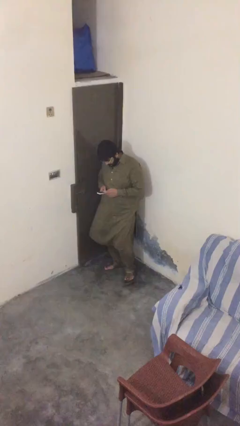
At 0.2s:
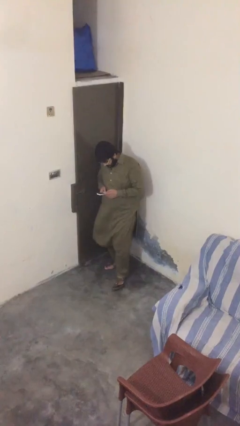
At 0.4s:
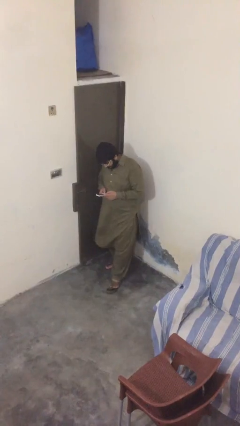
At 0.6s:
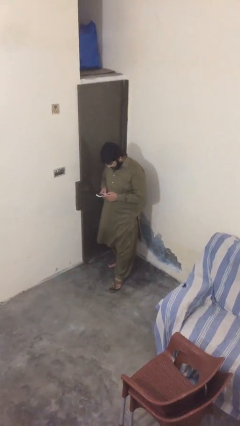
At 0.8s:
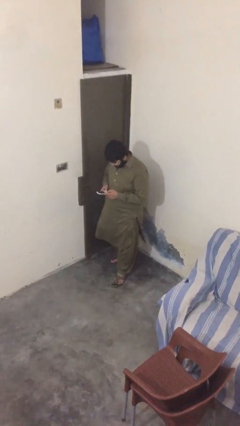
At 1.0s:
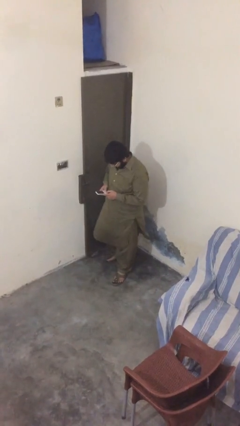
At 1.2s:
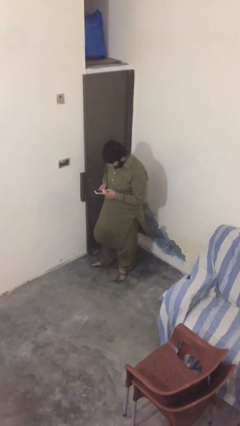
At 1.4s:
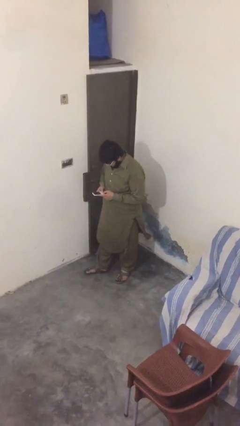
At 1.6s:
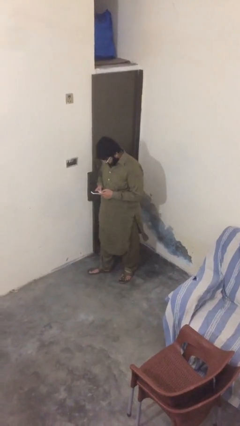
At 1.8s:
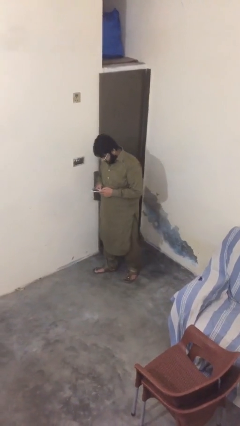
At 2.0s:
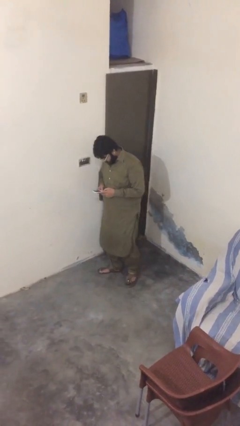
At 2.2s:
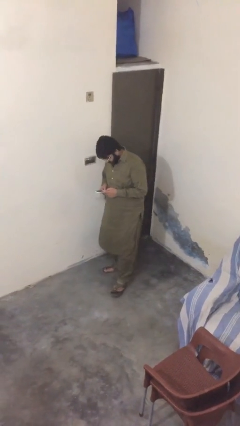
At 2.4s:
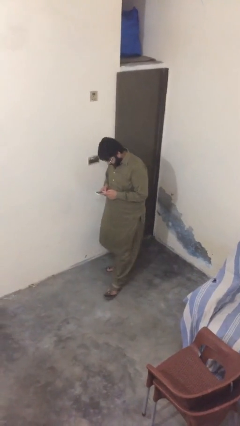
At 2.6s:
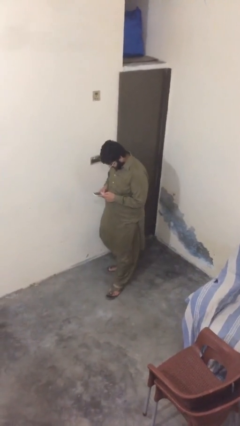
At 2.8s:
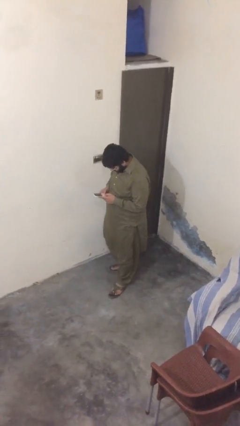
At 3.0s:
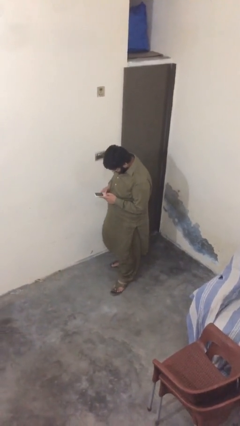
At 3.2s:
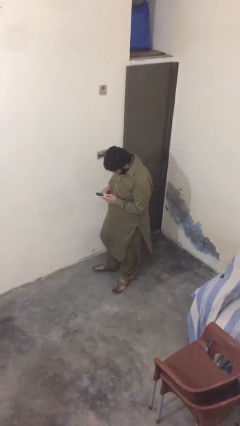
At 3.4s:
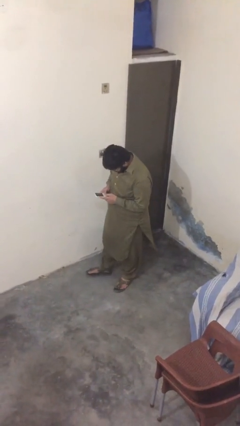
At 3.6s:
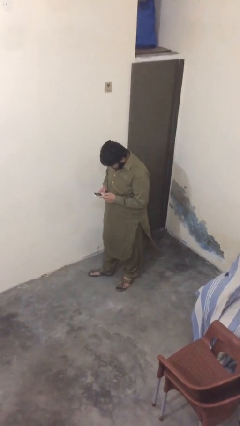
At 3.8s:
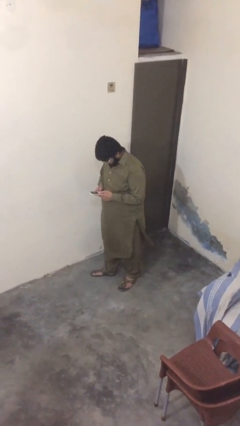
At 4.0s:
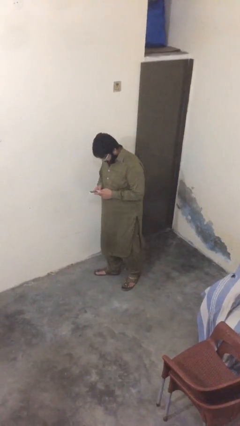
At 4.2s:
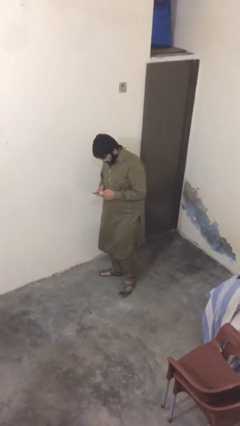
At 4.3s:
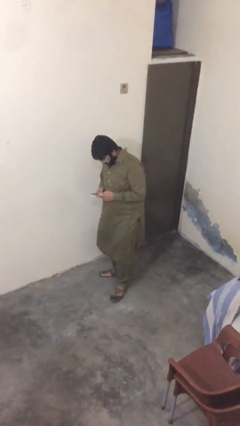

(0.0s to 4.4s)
person texts on phone

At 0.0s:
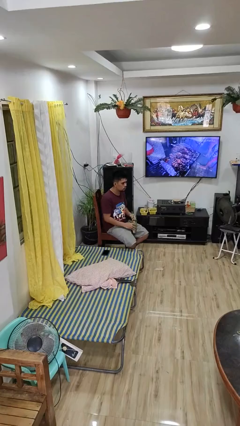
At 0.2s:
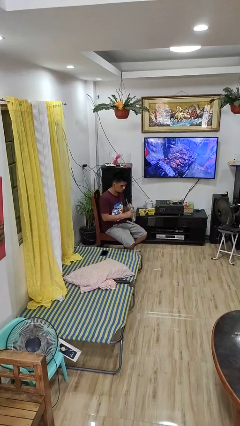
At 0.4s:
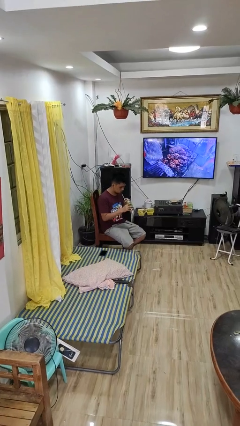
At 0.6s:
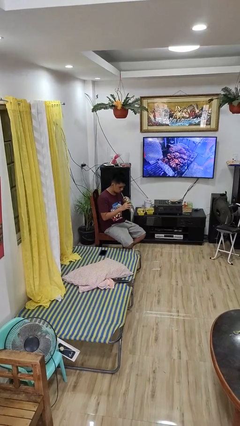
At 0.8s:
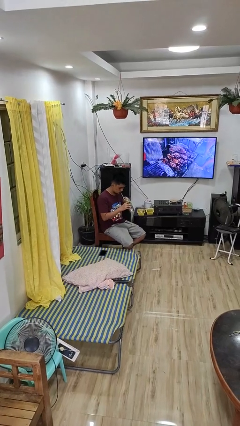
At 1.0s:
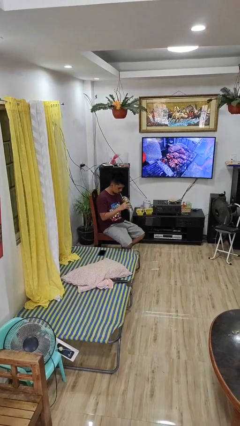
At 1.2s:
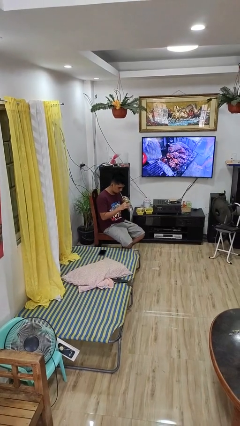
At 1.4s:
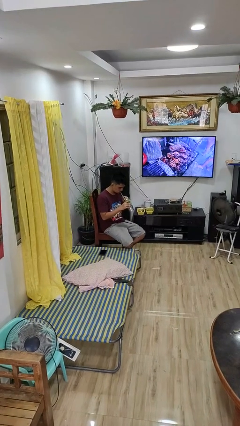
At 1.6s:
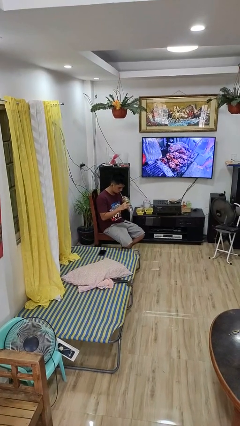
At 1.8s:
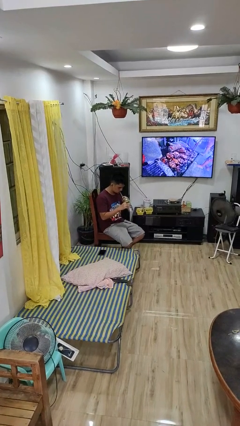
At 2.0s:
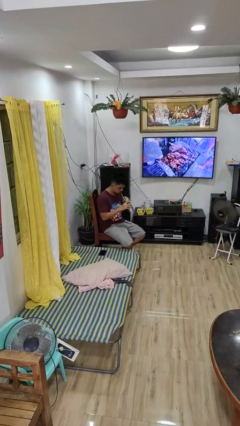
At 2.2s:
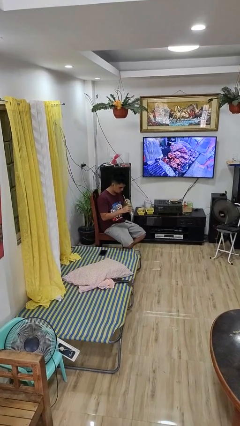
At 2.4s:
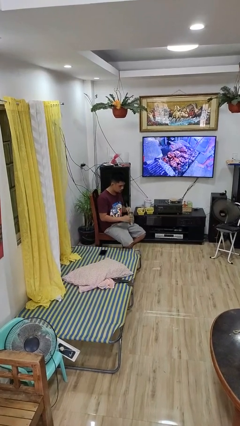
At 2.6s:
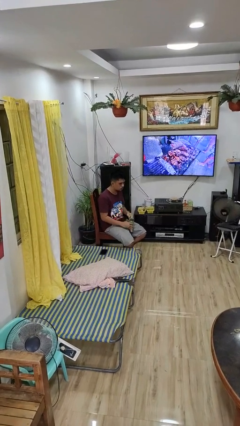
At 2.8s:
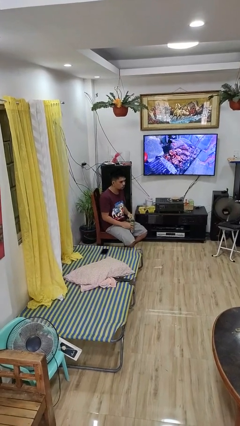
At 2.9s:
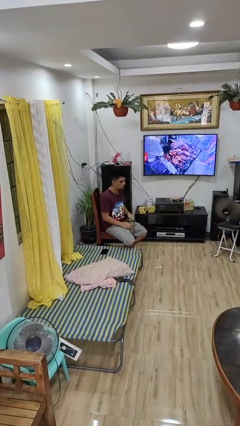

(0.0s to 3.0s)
person drinks from straw

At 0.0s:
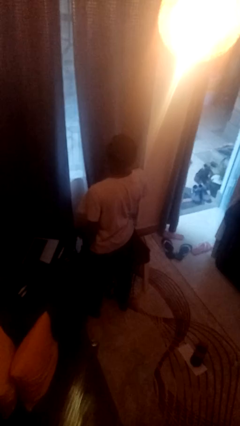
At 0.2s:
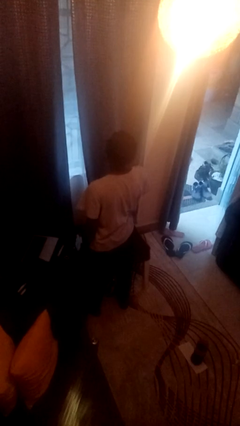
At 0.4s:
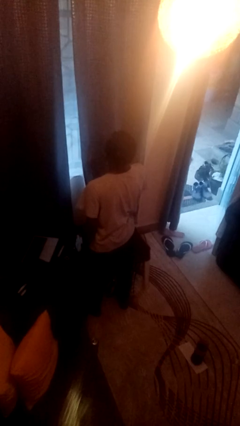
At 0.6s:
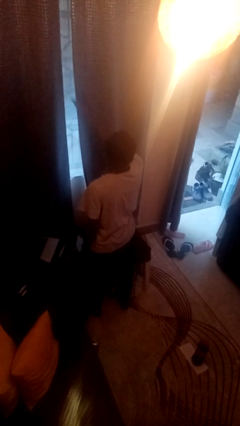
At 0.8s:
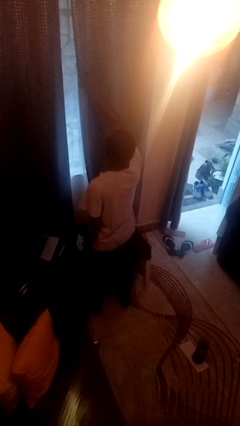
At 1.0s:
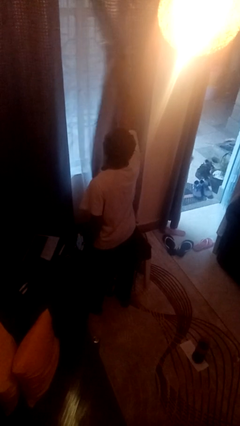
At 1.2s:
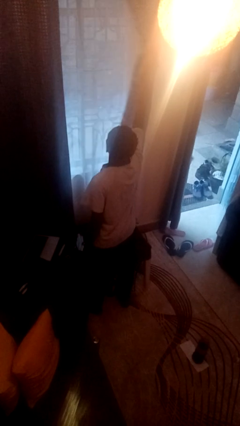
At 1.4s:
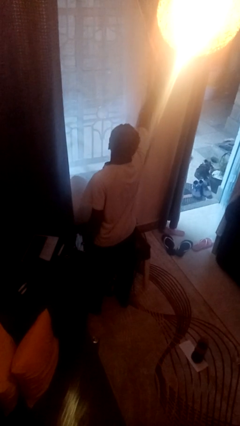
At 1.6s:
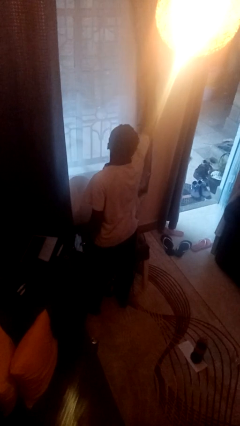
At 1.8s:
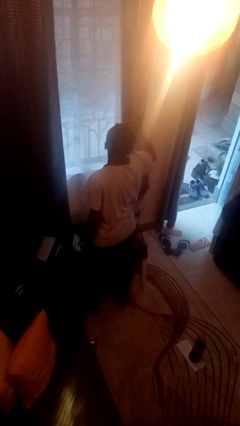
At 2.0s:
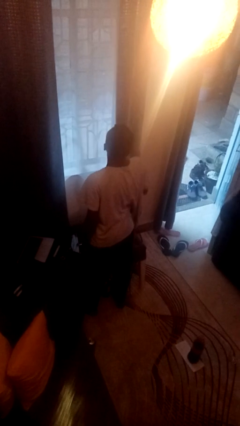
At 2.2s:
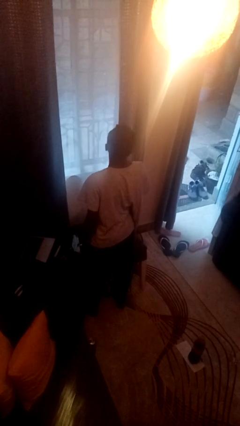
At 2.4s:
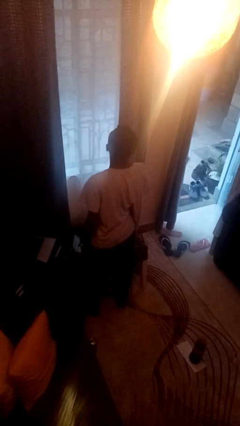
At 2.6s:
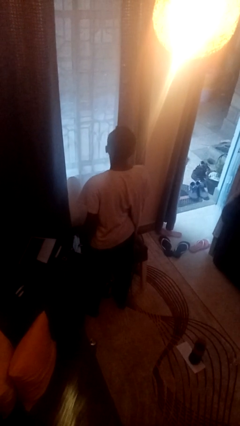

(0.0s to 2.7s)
person opens curtains

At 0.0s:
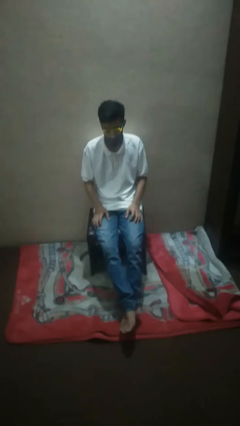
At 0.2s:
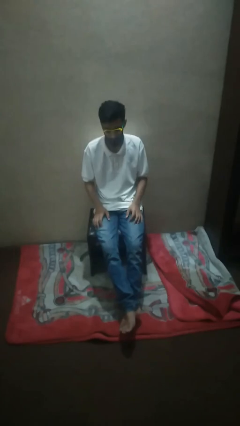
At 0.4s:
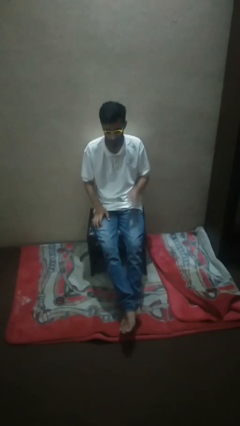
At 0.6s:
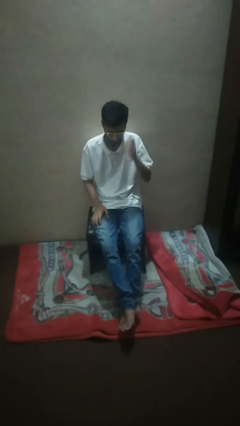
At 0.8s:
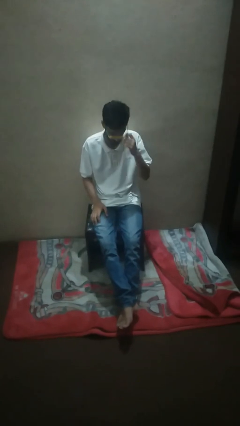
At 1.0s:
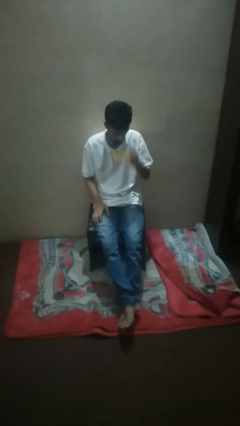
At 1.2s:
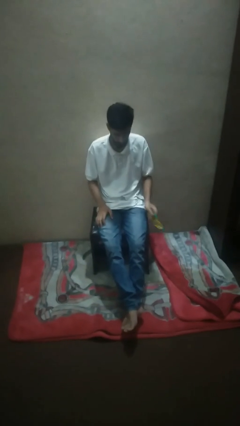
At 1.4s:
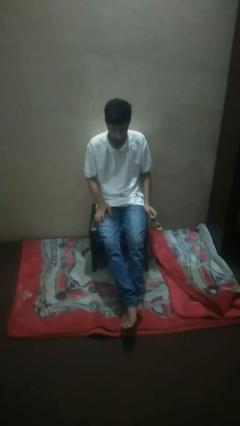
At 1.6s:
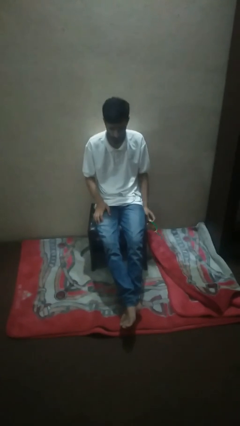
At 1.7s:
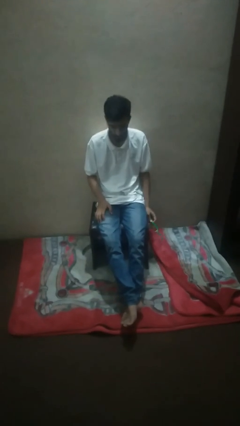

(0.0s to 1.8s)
person takes off sunglasses

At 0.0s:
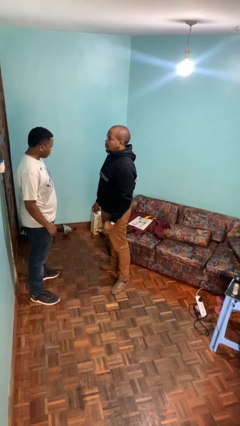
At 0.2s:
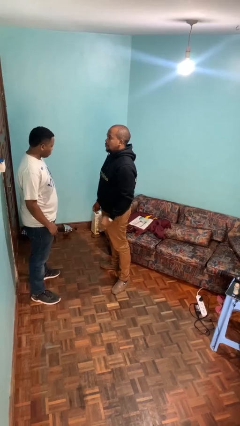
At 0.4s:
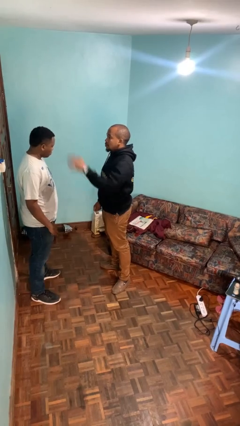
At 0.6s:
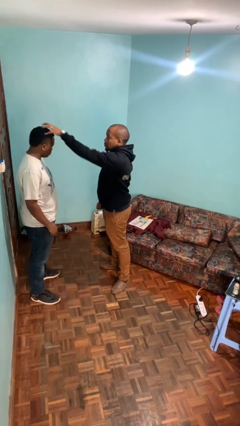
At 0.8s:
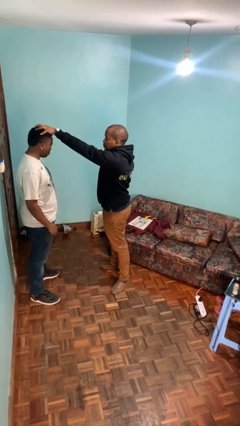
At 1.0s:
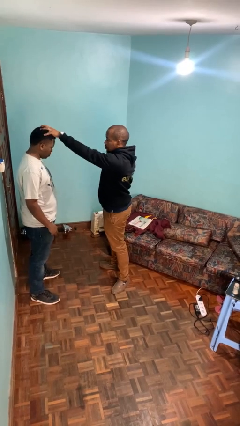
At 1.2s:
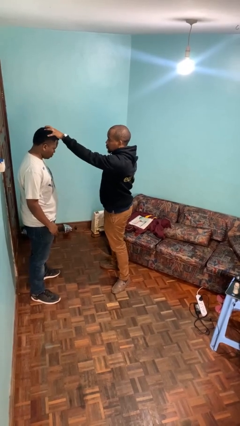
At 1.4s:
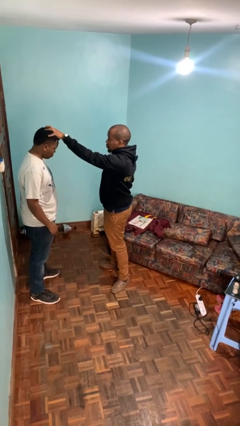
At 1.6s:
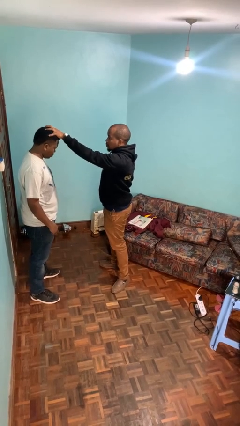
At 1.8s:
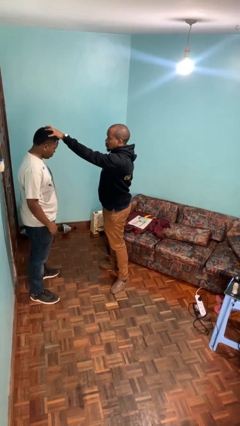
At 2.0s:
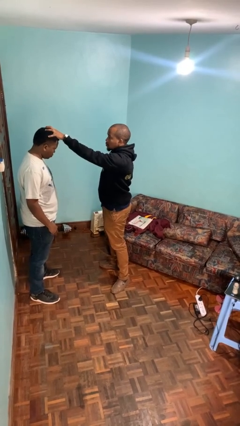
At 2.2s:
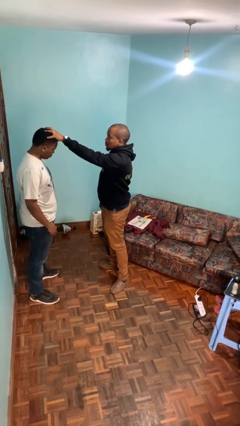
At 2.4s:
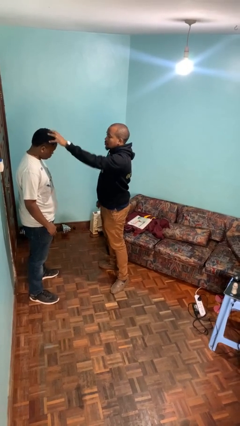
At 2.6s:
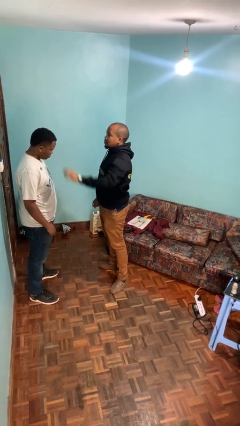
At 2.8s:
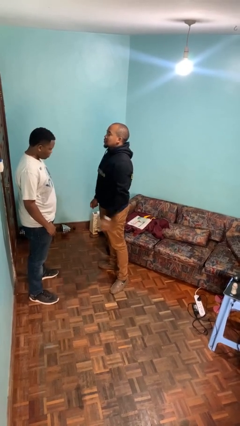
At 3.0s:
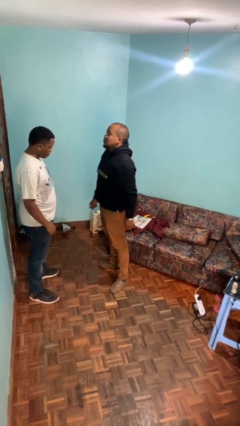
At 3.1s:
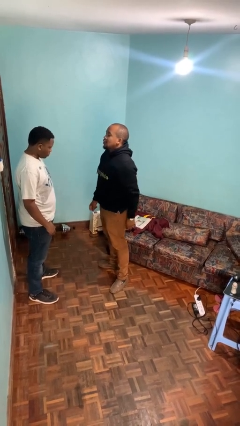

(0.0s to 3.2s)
person grabs person by hair

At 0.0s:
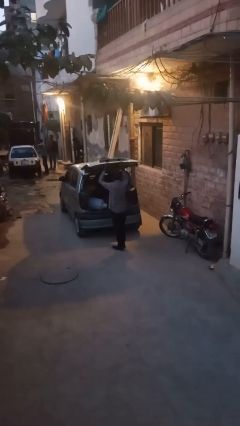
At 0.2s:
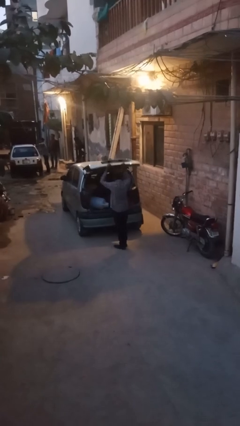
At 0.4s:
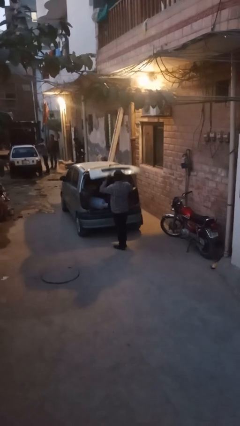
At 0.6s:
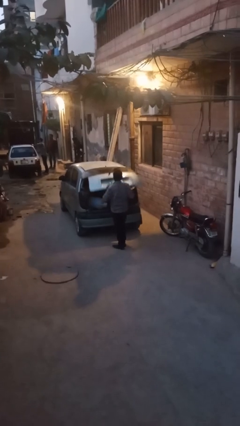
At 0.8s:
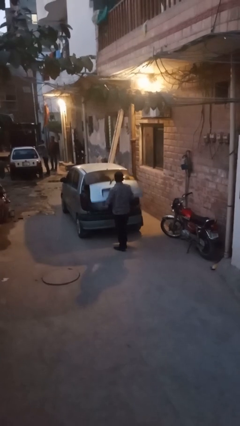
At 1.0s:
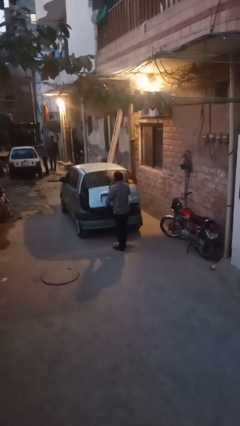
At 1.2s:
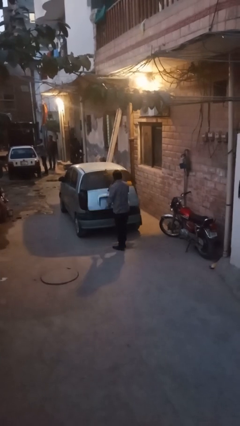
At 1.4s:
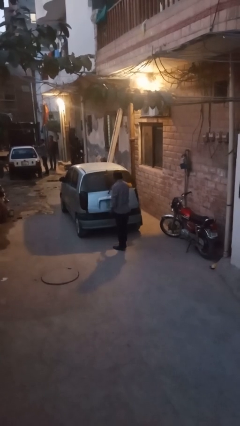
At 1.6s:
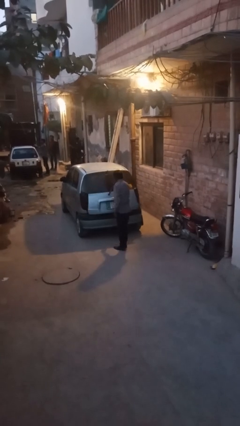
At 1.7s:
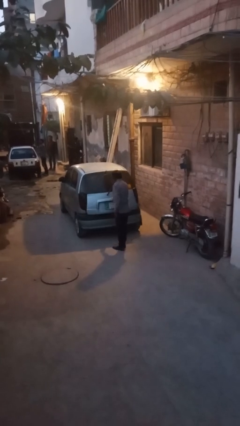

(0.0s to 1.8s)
person closes car trunk

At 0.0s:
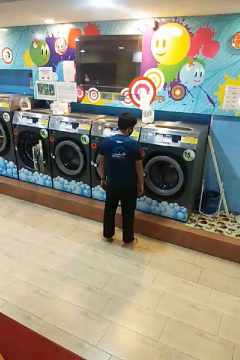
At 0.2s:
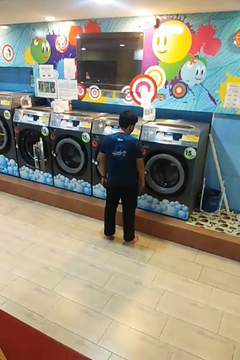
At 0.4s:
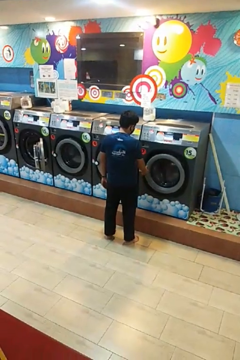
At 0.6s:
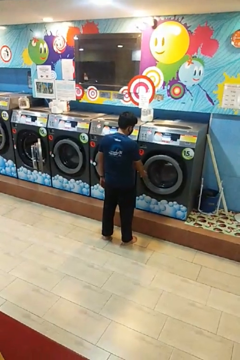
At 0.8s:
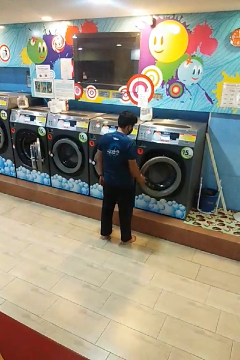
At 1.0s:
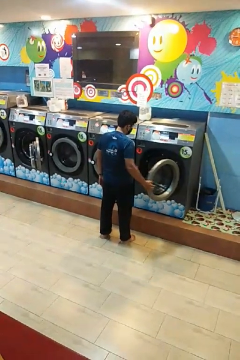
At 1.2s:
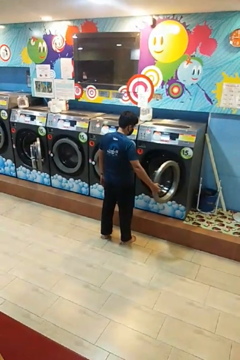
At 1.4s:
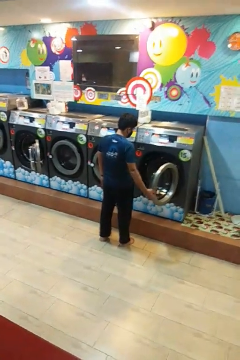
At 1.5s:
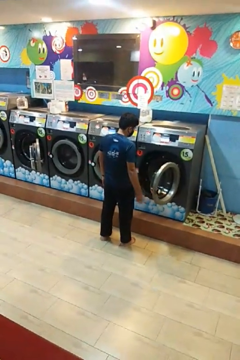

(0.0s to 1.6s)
person opens clothes washer
